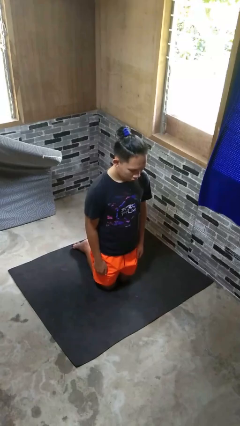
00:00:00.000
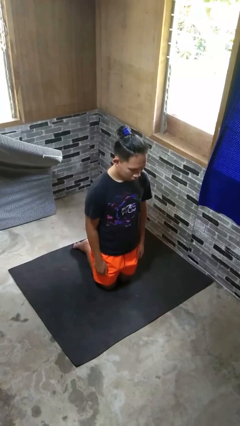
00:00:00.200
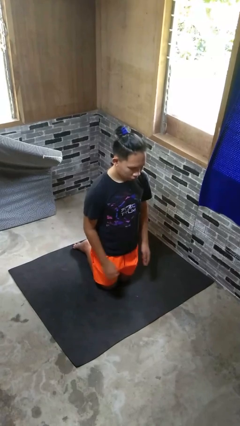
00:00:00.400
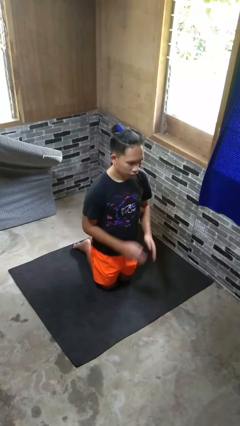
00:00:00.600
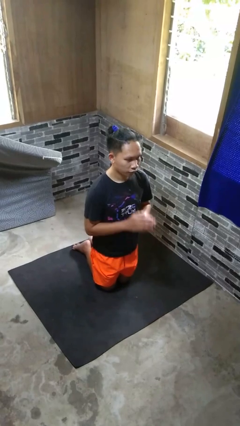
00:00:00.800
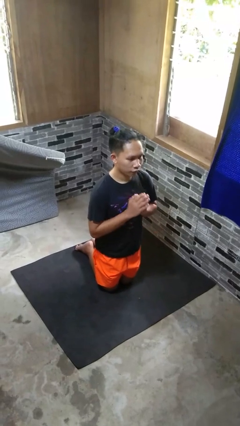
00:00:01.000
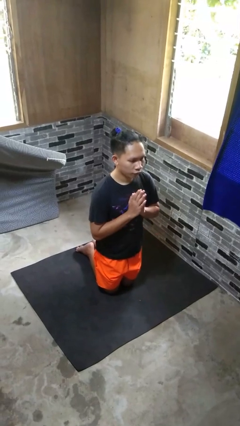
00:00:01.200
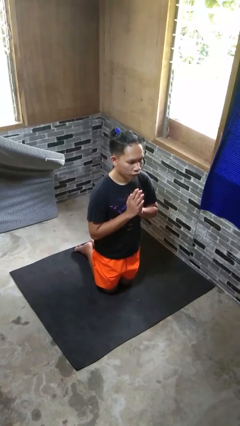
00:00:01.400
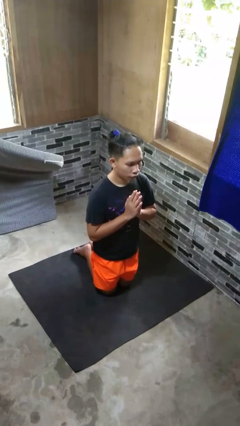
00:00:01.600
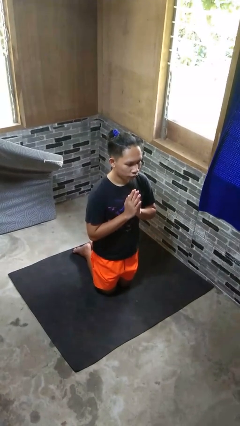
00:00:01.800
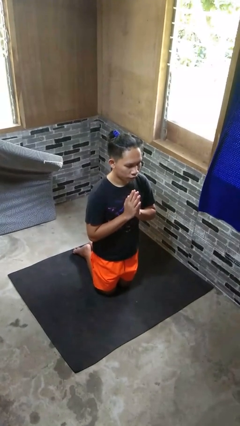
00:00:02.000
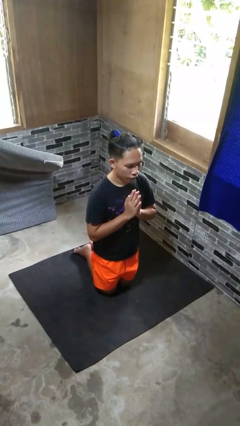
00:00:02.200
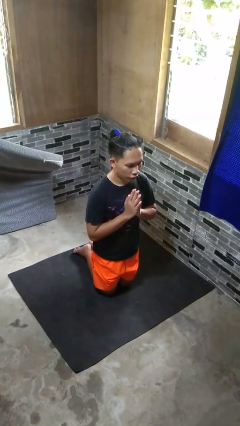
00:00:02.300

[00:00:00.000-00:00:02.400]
person prays

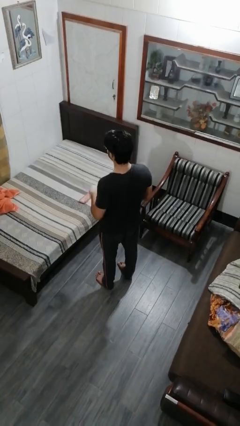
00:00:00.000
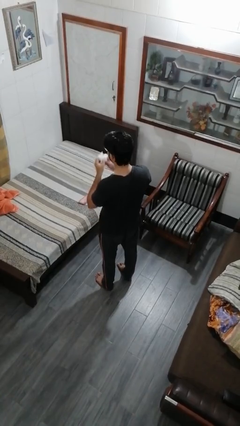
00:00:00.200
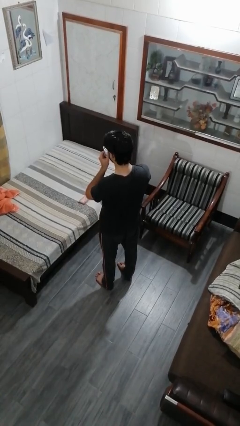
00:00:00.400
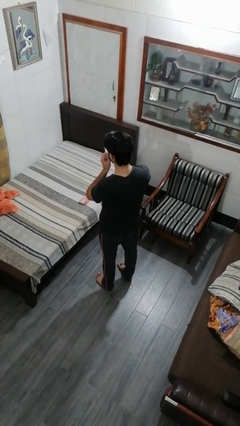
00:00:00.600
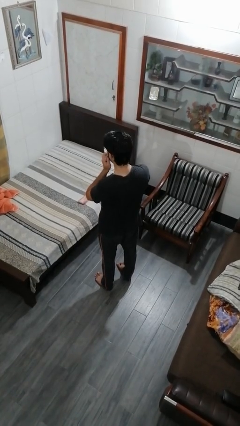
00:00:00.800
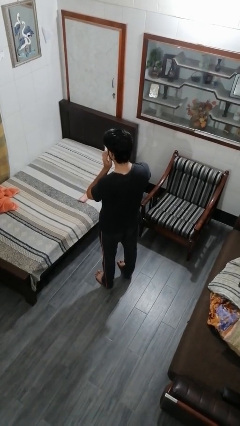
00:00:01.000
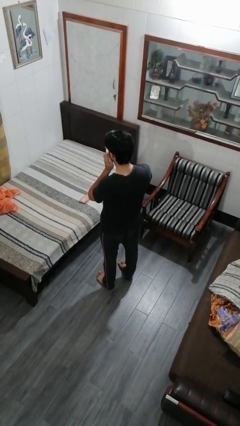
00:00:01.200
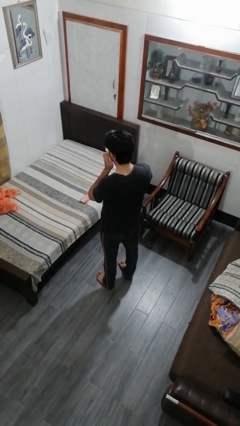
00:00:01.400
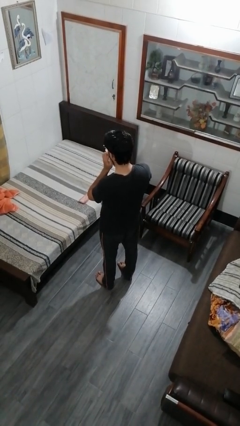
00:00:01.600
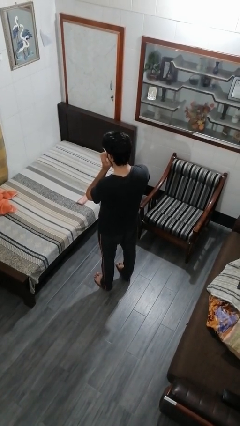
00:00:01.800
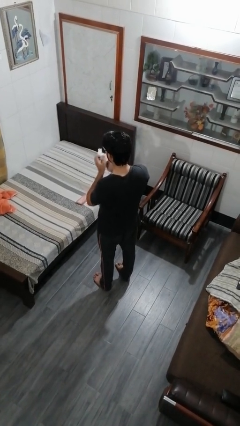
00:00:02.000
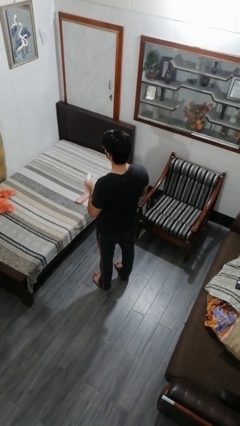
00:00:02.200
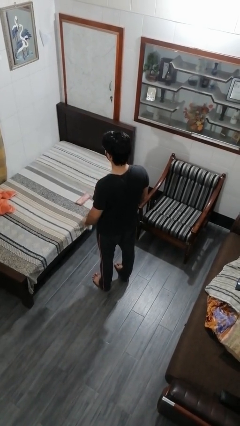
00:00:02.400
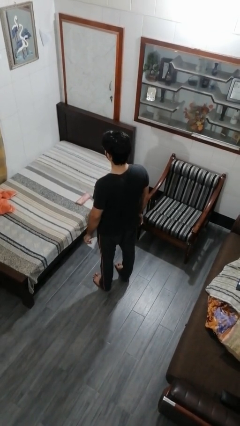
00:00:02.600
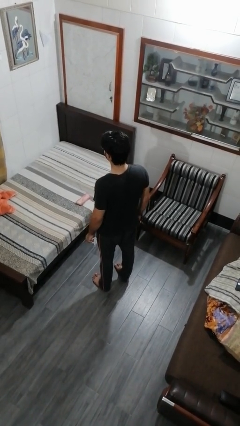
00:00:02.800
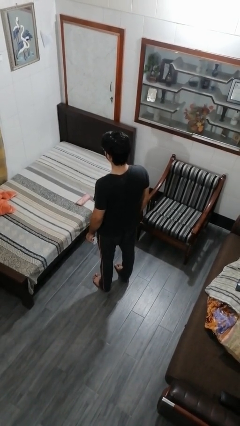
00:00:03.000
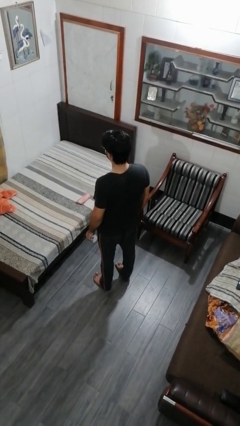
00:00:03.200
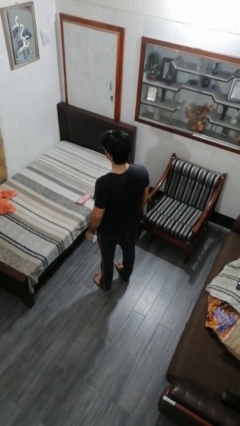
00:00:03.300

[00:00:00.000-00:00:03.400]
person blows nose

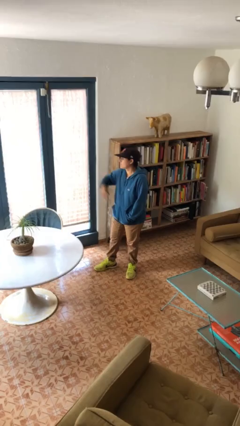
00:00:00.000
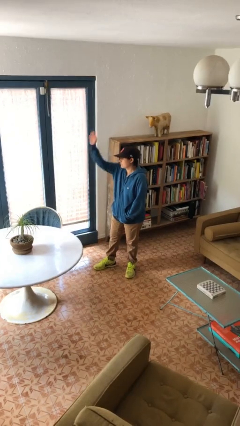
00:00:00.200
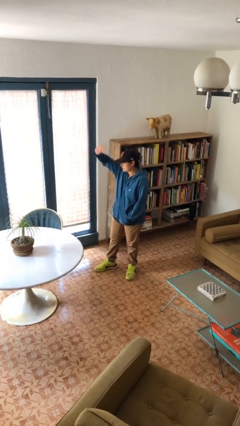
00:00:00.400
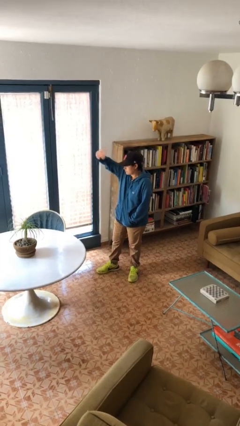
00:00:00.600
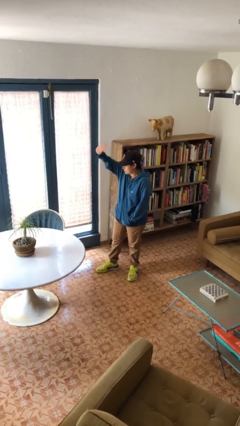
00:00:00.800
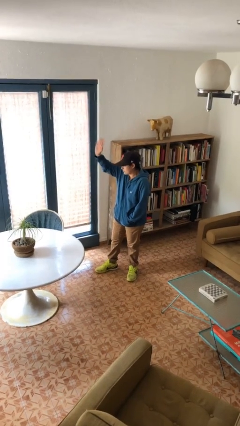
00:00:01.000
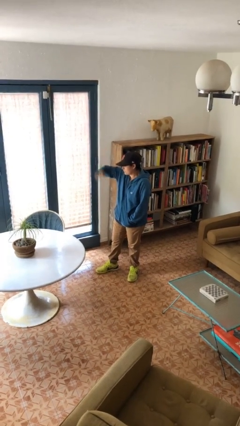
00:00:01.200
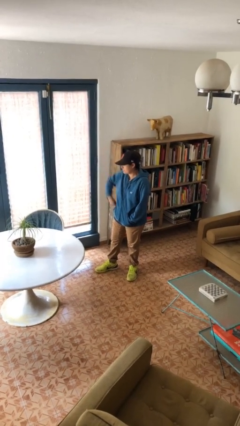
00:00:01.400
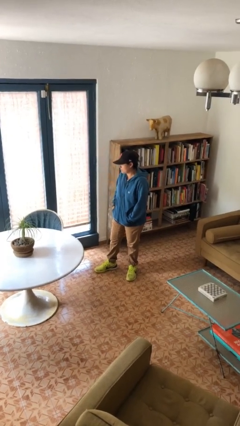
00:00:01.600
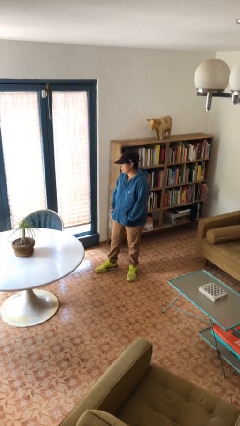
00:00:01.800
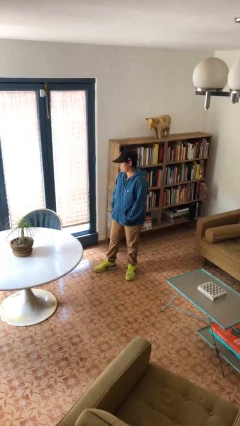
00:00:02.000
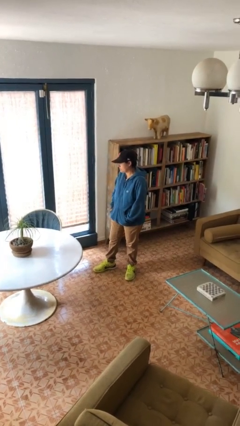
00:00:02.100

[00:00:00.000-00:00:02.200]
person waves at person

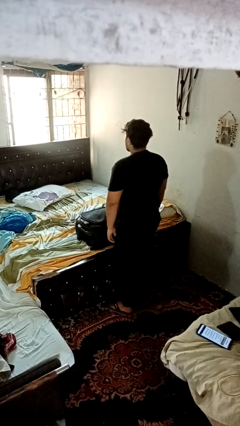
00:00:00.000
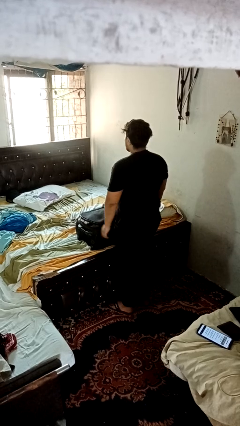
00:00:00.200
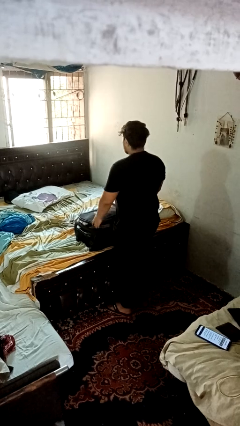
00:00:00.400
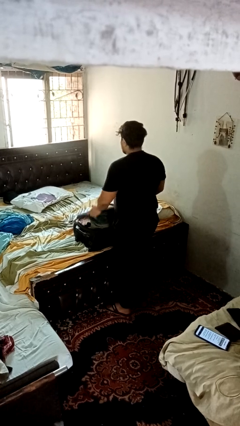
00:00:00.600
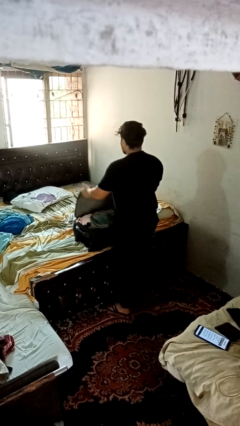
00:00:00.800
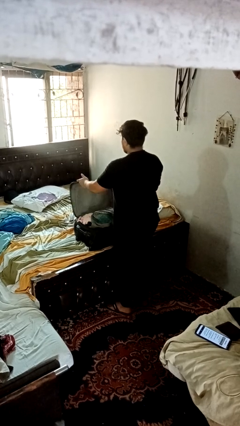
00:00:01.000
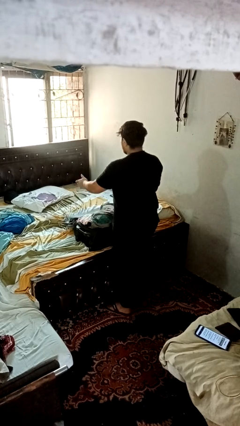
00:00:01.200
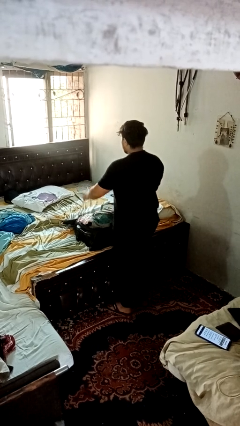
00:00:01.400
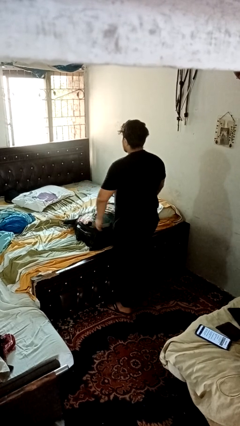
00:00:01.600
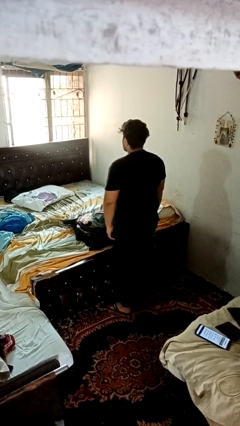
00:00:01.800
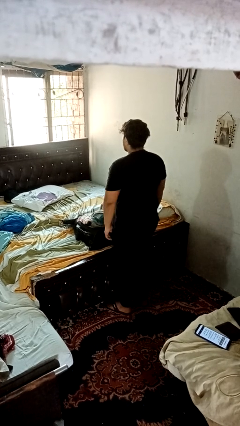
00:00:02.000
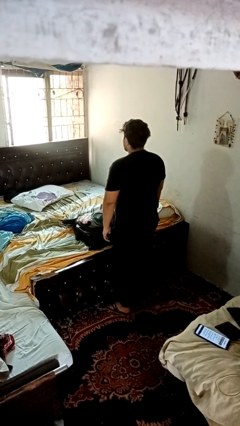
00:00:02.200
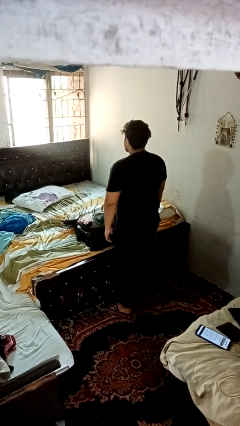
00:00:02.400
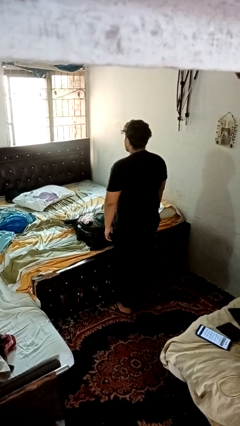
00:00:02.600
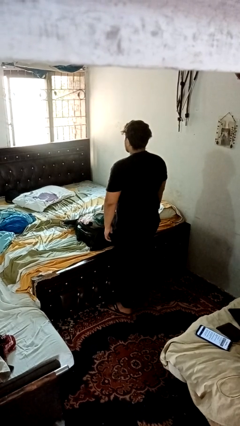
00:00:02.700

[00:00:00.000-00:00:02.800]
person opens suitcase

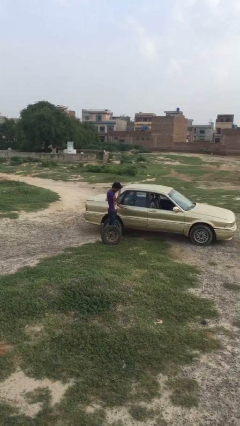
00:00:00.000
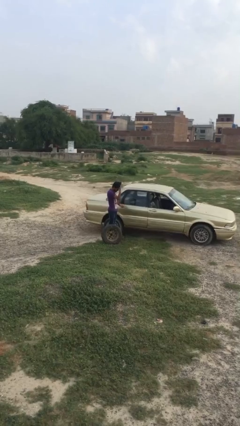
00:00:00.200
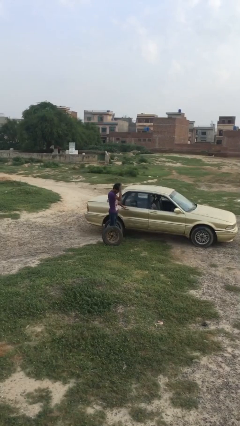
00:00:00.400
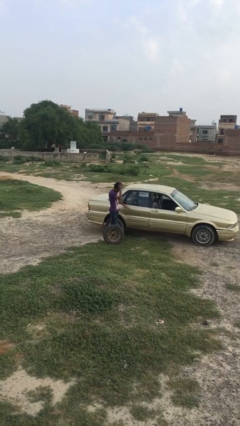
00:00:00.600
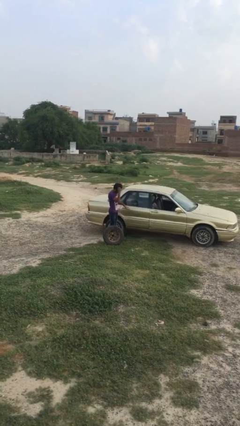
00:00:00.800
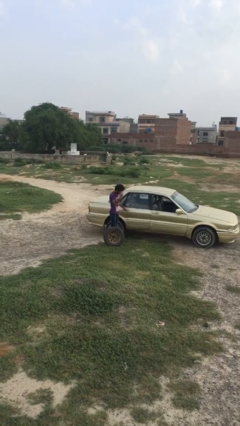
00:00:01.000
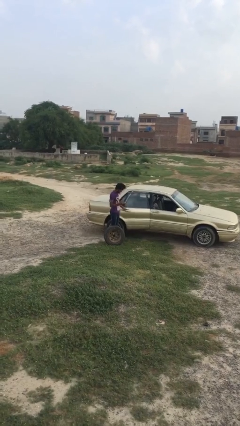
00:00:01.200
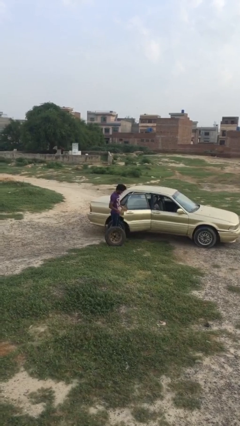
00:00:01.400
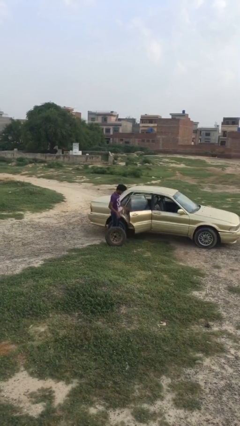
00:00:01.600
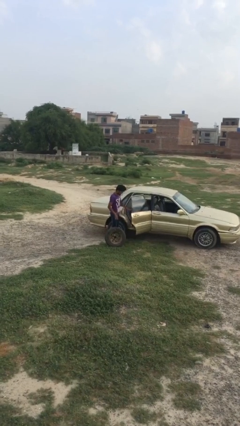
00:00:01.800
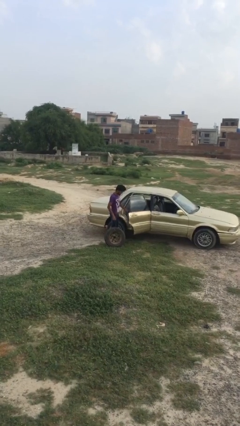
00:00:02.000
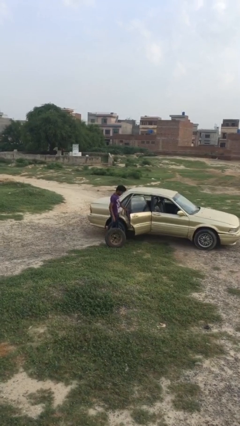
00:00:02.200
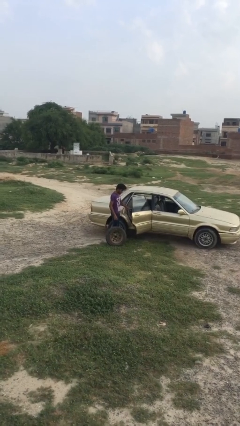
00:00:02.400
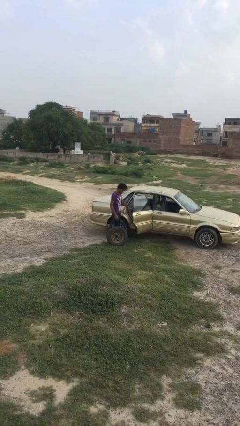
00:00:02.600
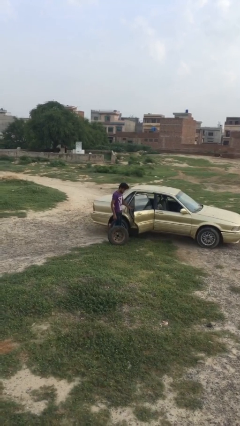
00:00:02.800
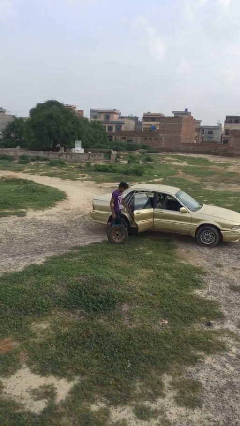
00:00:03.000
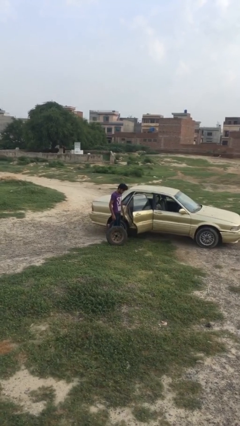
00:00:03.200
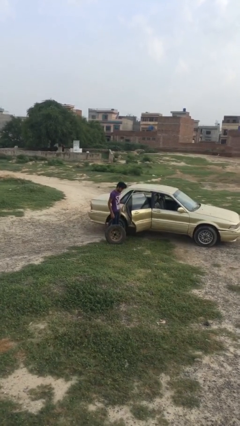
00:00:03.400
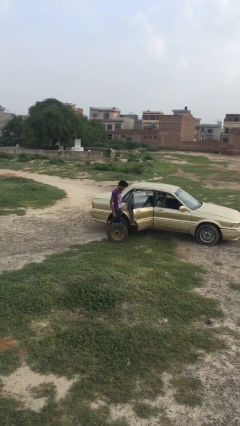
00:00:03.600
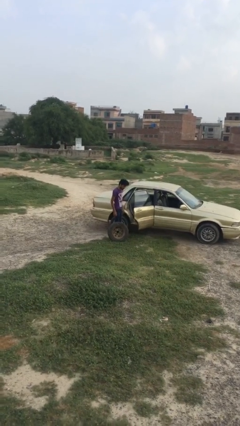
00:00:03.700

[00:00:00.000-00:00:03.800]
person opens car door

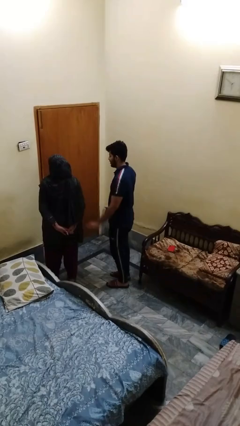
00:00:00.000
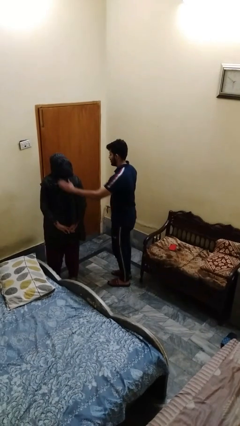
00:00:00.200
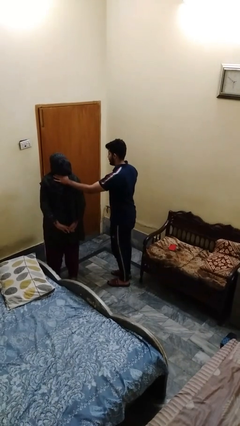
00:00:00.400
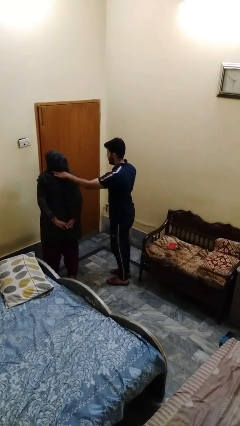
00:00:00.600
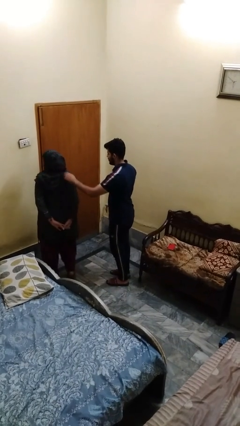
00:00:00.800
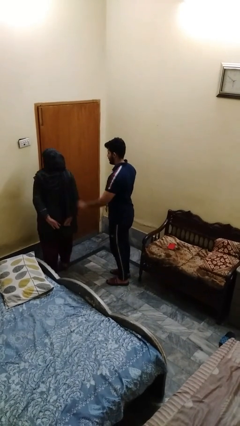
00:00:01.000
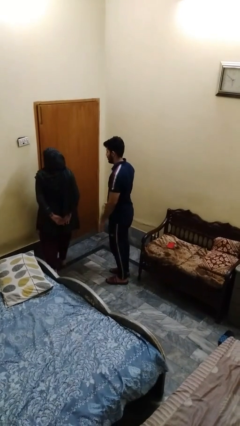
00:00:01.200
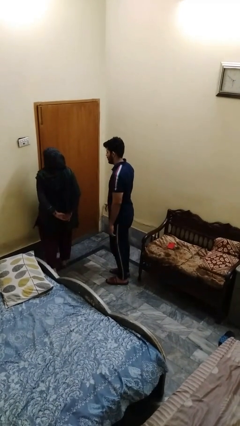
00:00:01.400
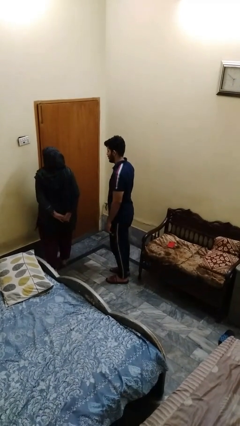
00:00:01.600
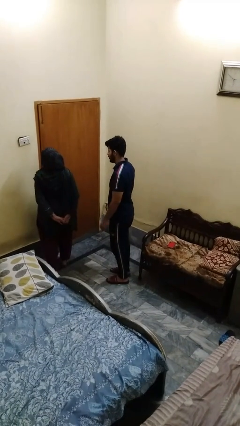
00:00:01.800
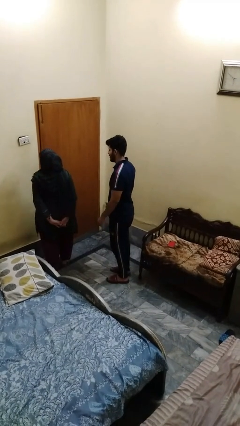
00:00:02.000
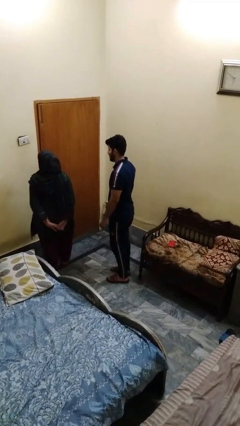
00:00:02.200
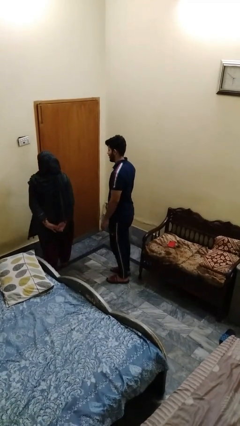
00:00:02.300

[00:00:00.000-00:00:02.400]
person shoves person
